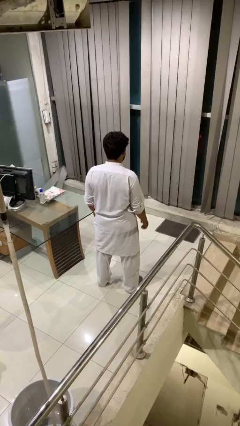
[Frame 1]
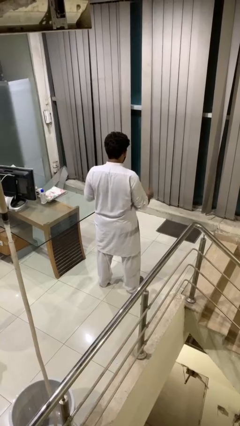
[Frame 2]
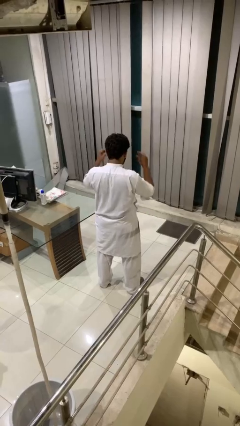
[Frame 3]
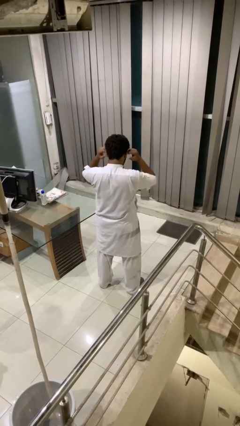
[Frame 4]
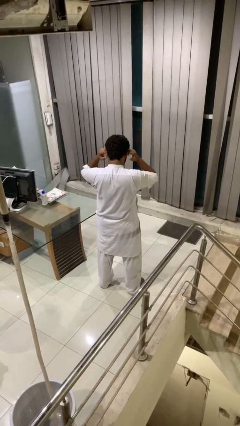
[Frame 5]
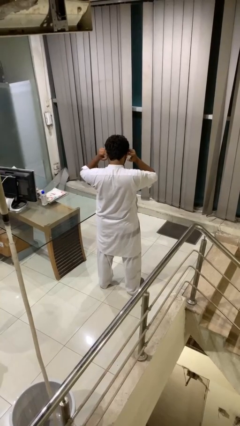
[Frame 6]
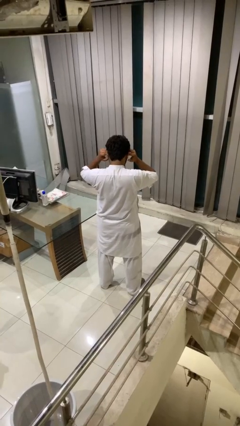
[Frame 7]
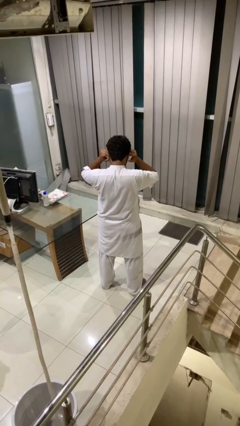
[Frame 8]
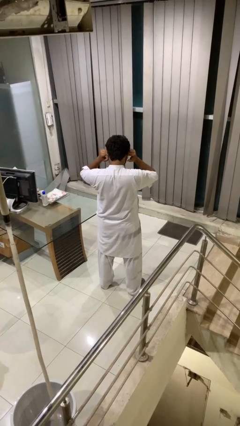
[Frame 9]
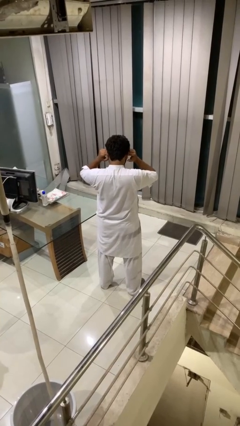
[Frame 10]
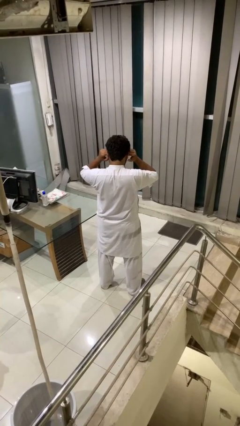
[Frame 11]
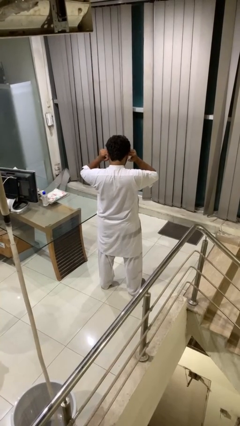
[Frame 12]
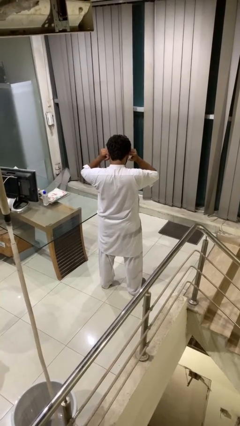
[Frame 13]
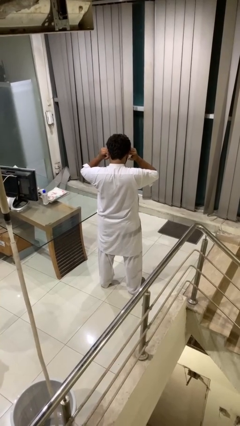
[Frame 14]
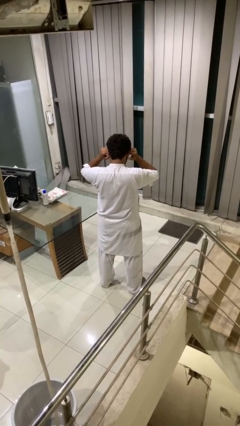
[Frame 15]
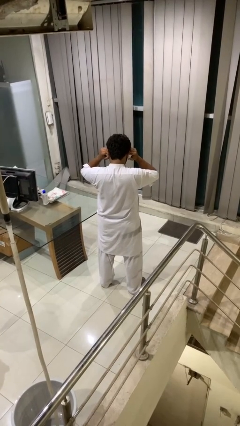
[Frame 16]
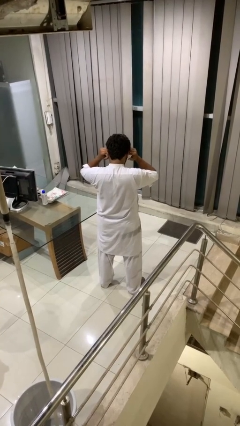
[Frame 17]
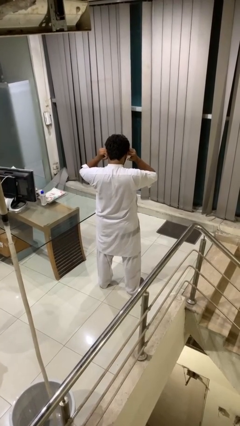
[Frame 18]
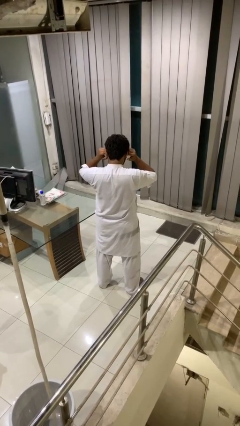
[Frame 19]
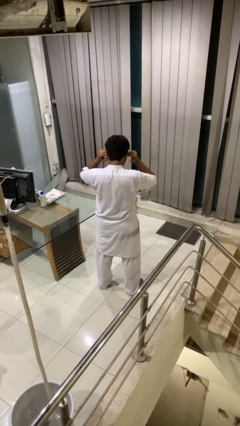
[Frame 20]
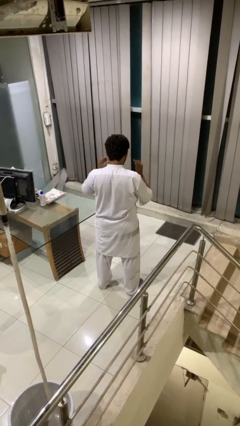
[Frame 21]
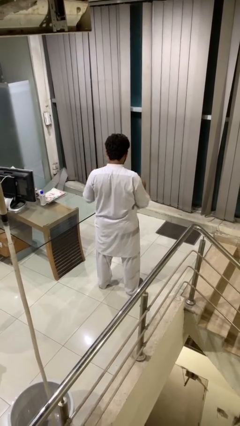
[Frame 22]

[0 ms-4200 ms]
person puts fingers in ear

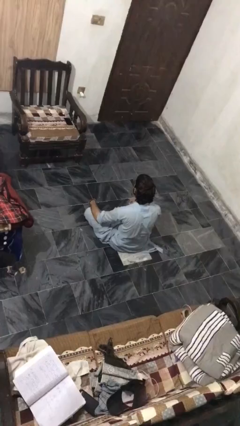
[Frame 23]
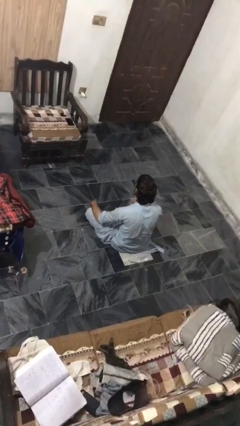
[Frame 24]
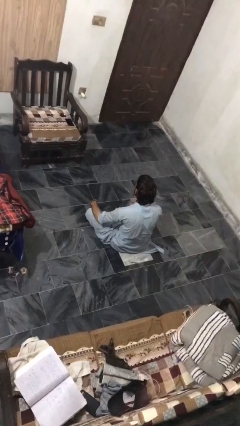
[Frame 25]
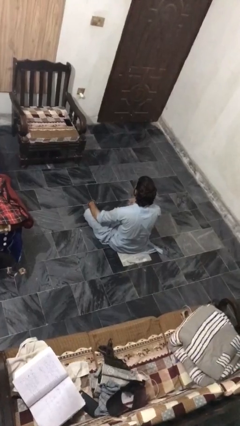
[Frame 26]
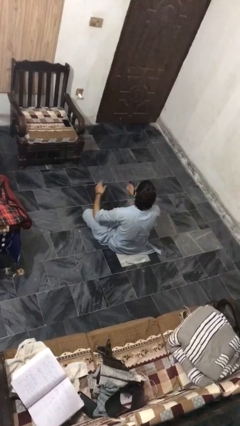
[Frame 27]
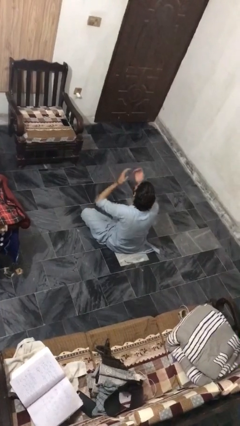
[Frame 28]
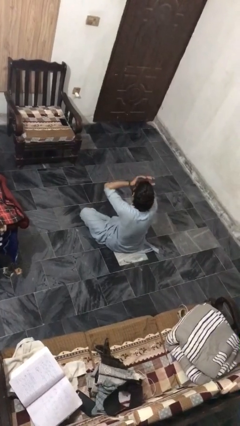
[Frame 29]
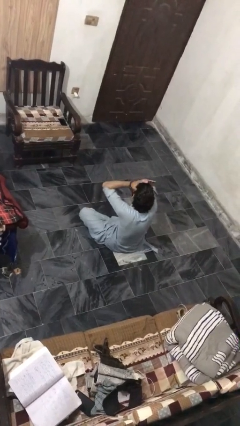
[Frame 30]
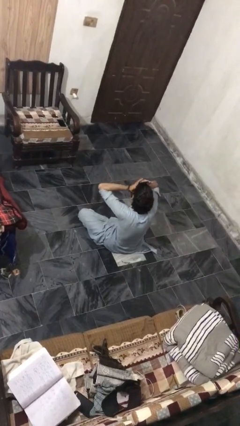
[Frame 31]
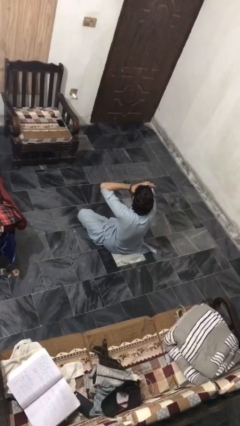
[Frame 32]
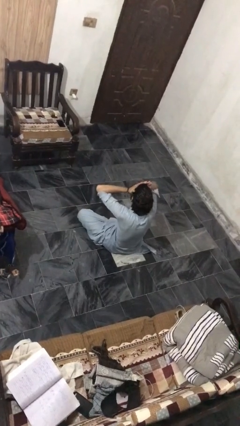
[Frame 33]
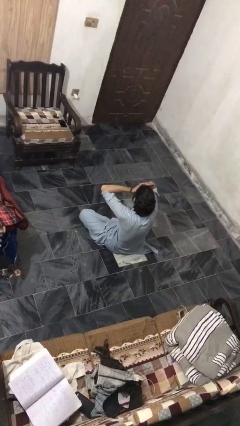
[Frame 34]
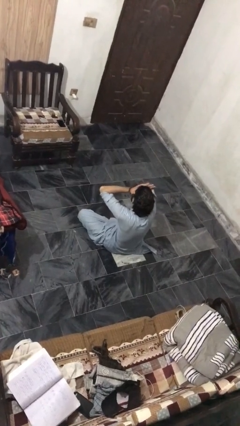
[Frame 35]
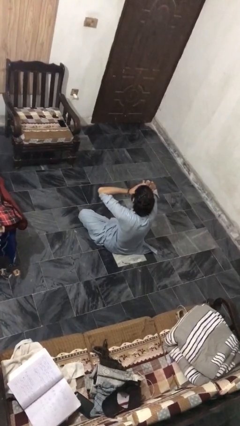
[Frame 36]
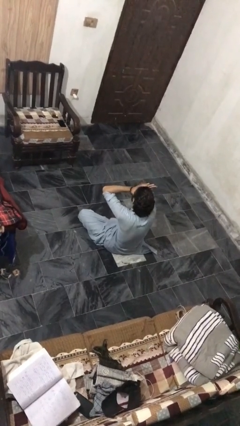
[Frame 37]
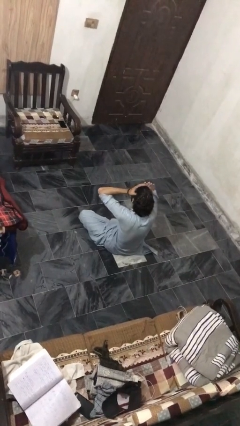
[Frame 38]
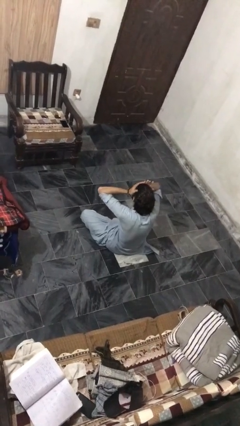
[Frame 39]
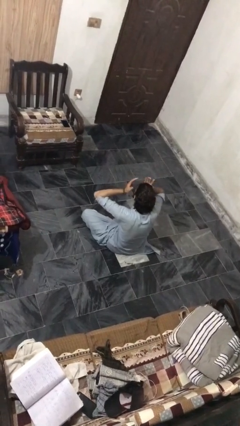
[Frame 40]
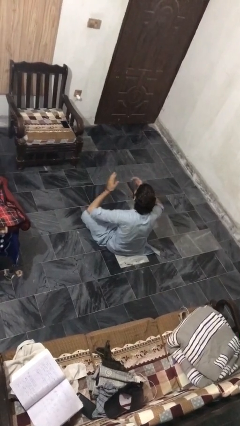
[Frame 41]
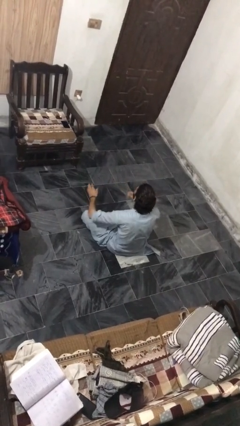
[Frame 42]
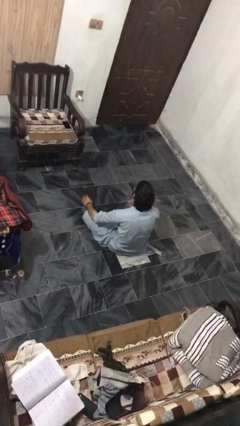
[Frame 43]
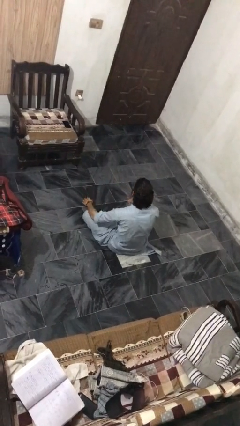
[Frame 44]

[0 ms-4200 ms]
person rubs eyes

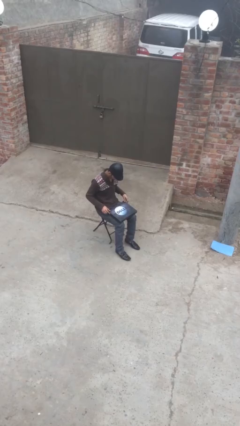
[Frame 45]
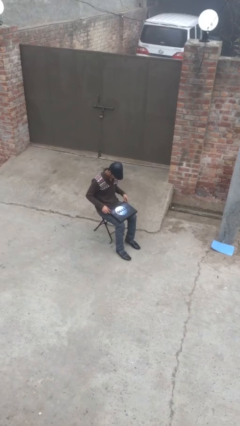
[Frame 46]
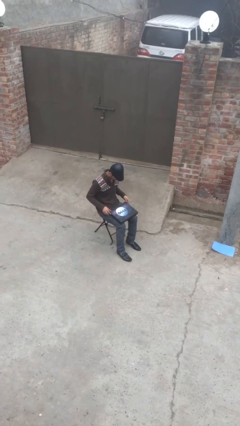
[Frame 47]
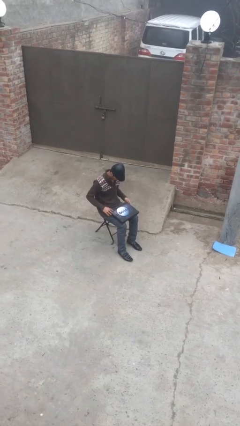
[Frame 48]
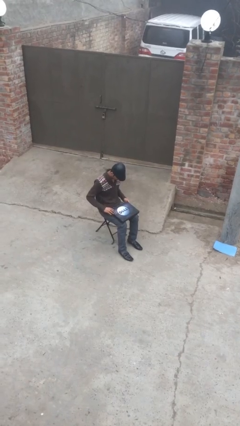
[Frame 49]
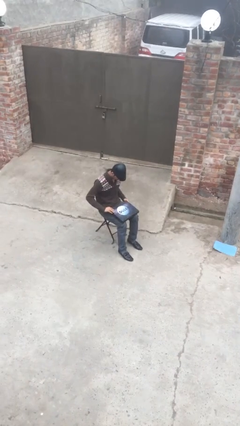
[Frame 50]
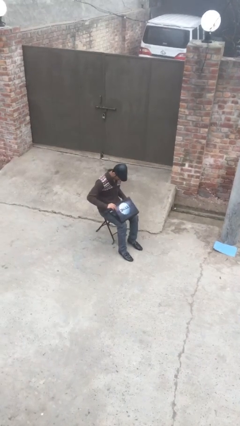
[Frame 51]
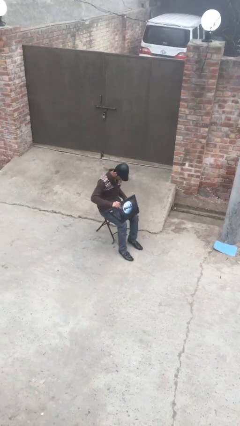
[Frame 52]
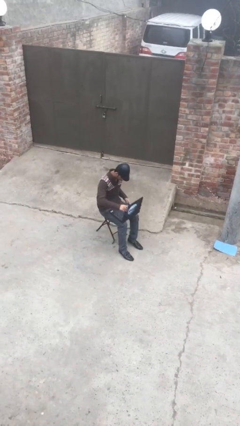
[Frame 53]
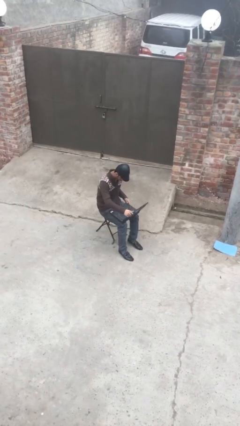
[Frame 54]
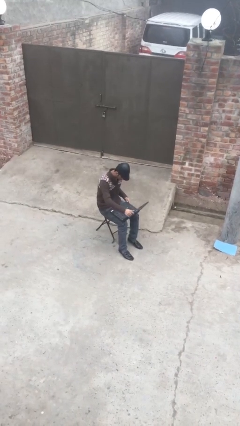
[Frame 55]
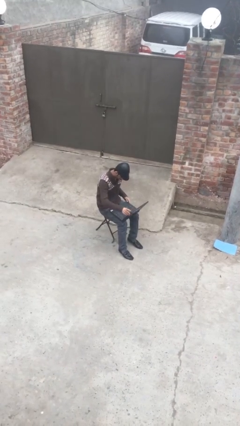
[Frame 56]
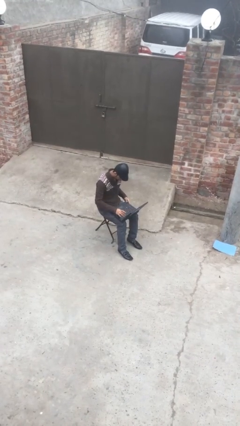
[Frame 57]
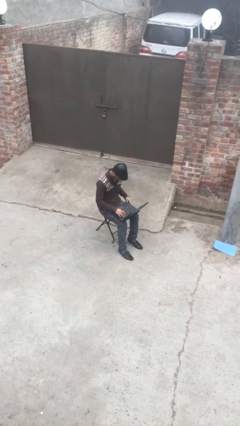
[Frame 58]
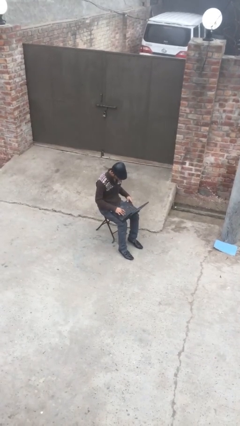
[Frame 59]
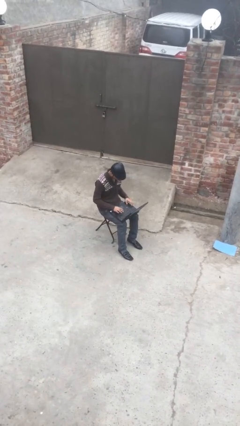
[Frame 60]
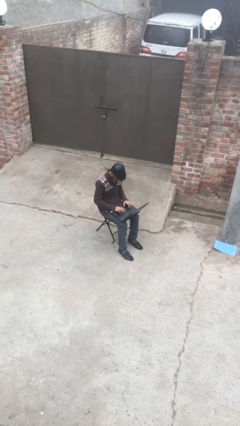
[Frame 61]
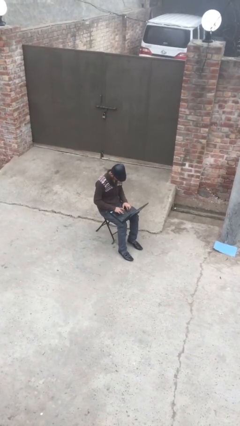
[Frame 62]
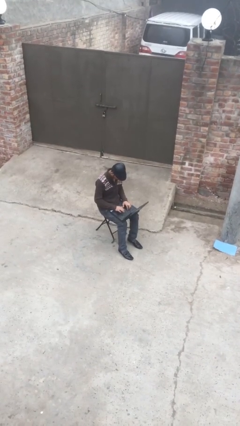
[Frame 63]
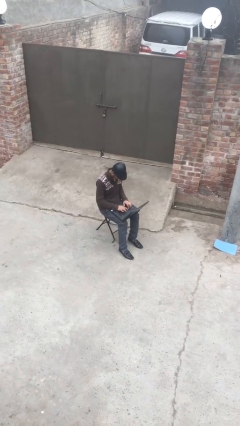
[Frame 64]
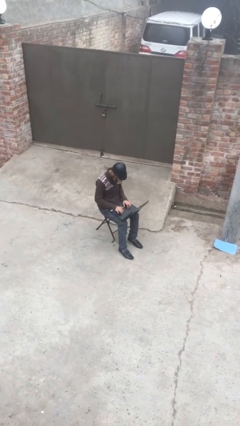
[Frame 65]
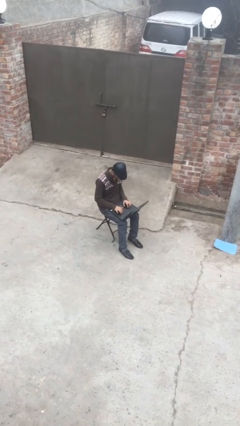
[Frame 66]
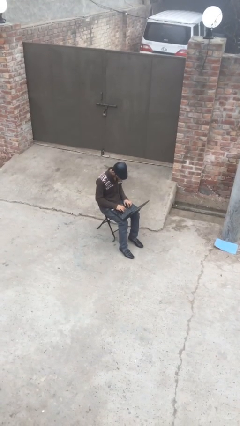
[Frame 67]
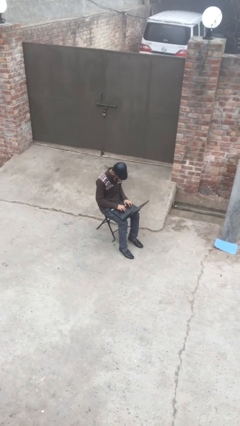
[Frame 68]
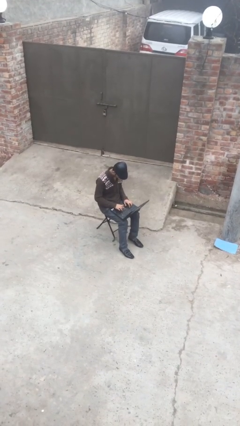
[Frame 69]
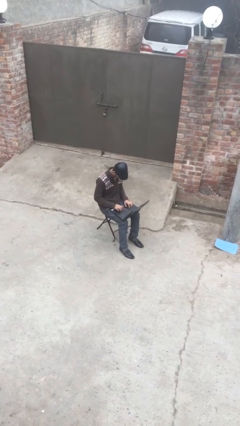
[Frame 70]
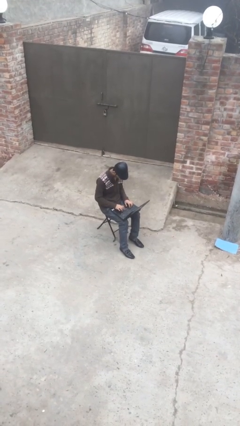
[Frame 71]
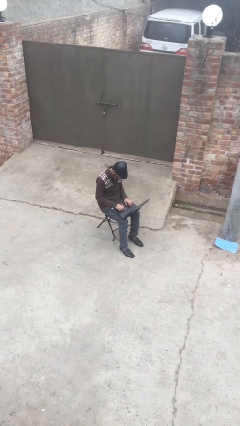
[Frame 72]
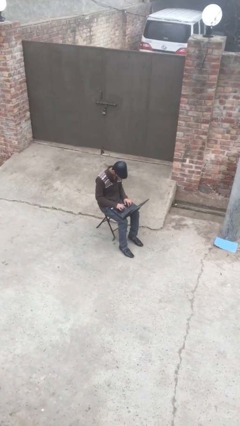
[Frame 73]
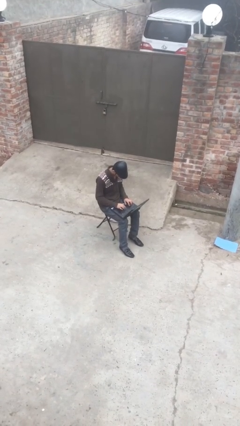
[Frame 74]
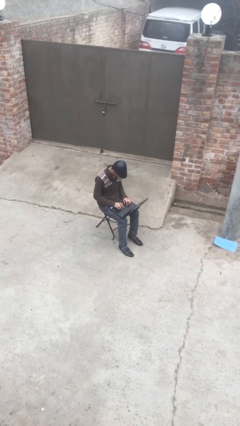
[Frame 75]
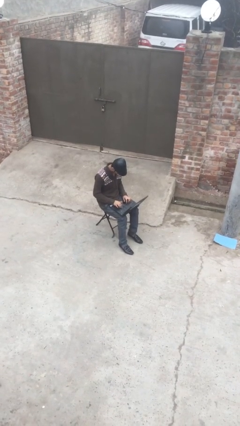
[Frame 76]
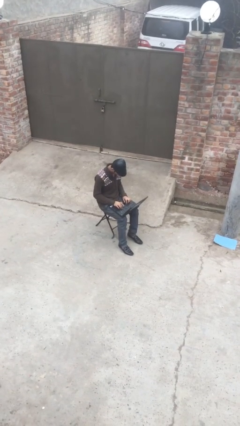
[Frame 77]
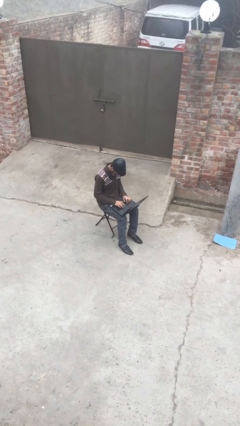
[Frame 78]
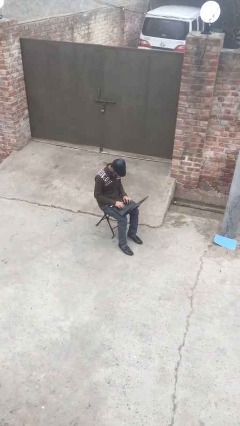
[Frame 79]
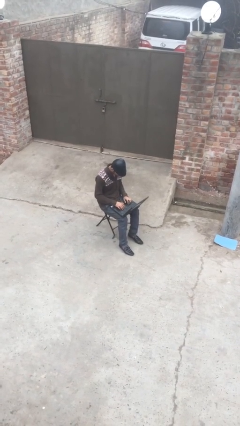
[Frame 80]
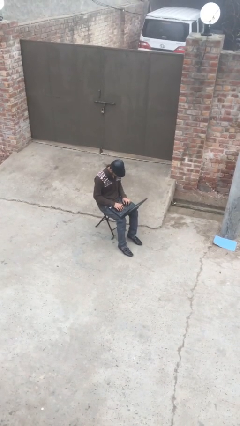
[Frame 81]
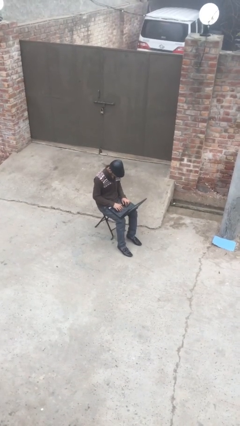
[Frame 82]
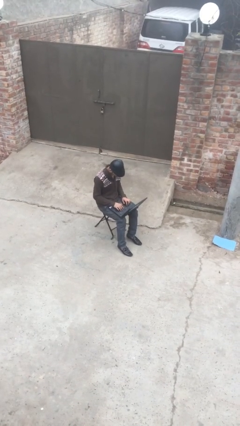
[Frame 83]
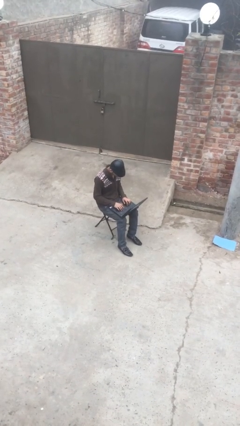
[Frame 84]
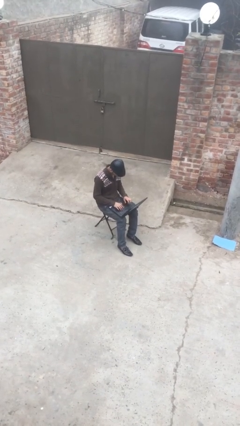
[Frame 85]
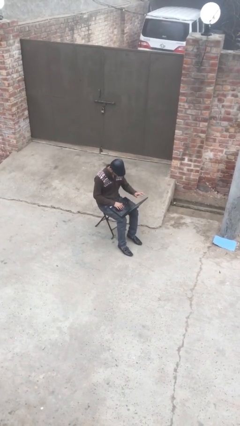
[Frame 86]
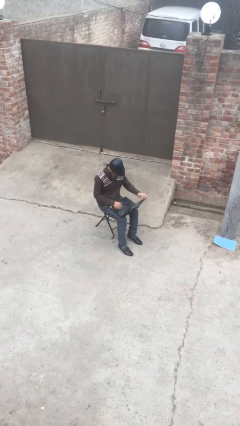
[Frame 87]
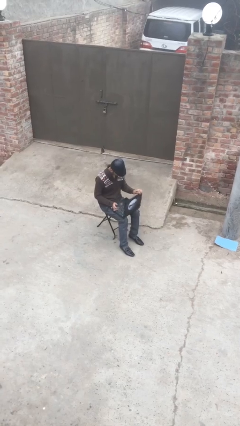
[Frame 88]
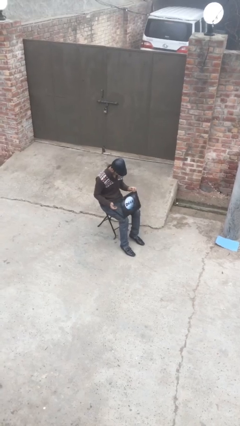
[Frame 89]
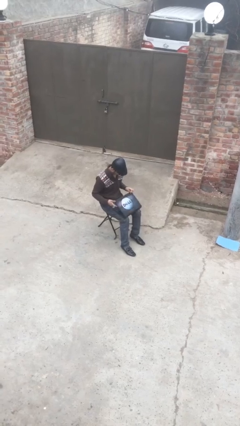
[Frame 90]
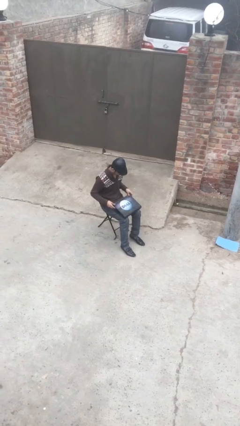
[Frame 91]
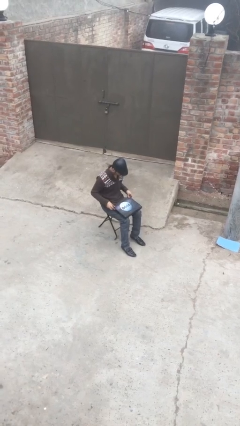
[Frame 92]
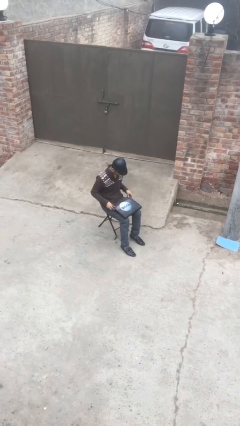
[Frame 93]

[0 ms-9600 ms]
person interacts with laptop
